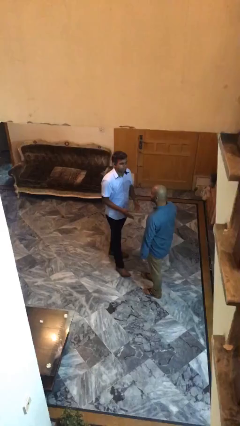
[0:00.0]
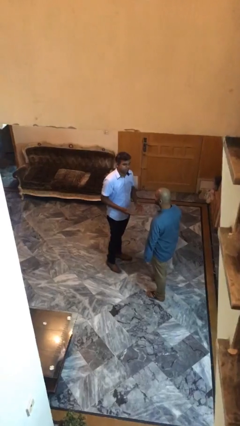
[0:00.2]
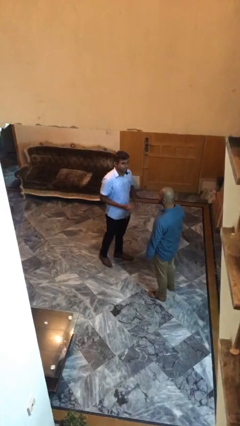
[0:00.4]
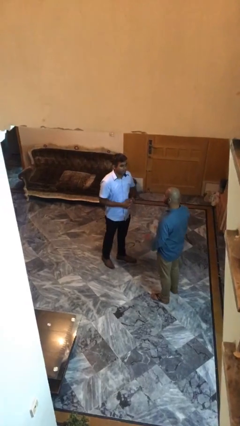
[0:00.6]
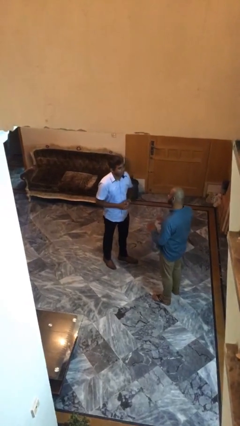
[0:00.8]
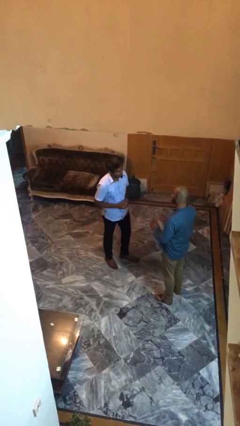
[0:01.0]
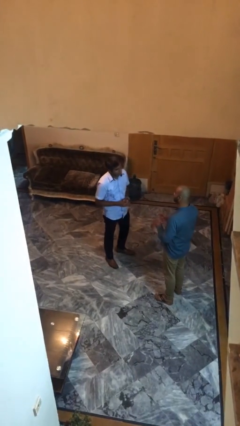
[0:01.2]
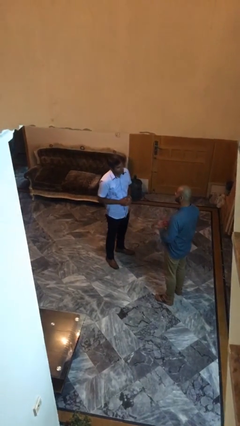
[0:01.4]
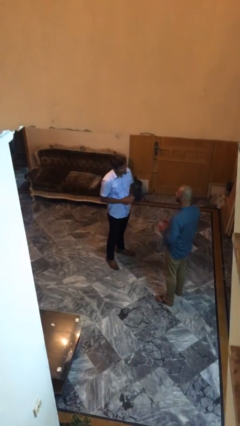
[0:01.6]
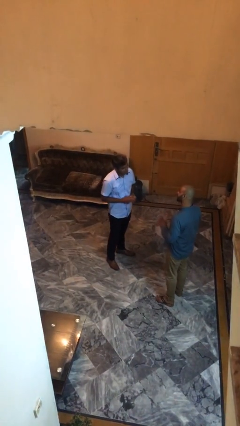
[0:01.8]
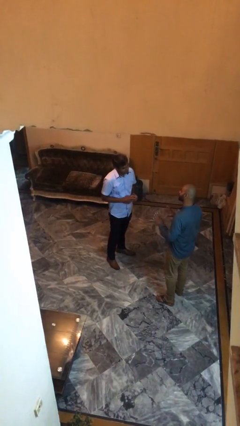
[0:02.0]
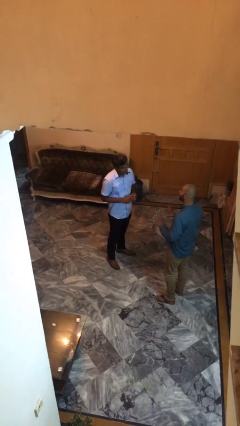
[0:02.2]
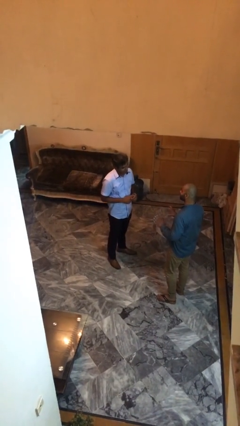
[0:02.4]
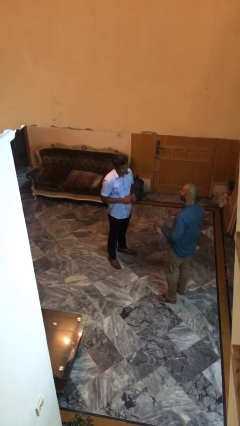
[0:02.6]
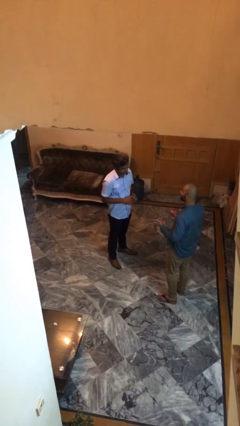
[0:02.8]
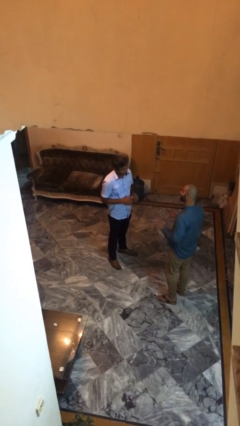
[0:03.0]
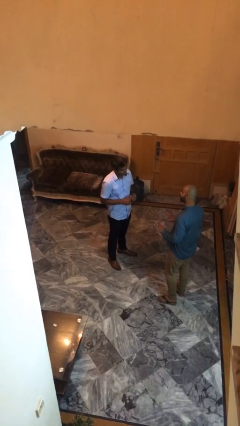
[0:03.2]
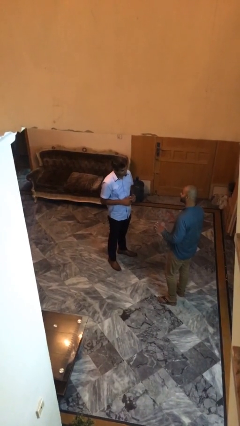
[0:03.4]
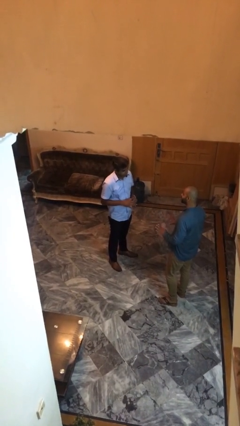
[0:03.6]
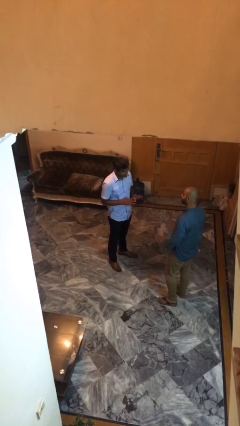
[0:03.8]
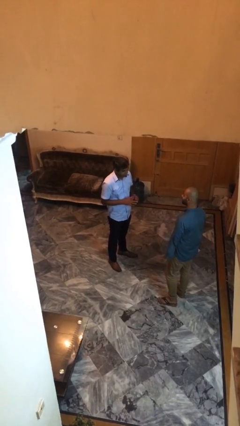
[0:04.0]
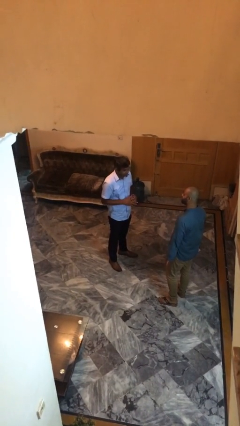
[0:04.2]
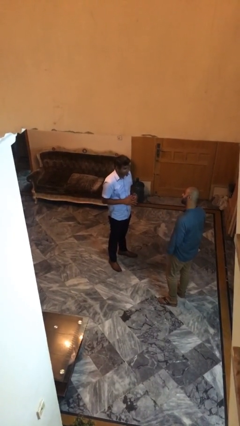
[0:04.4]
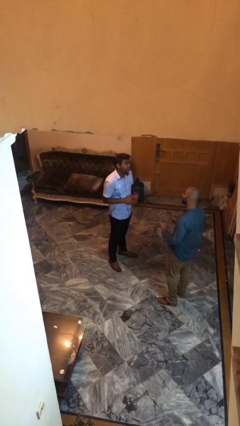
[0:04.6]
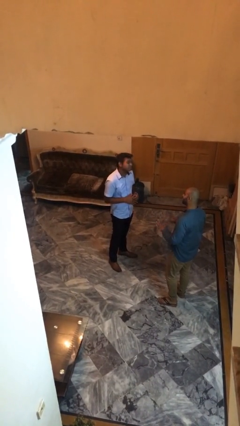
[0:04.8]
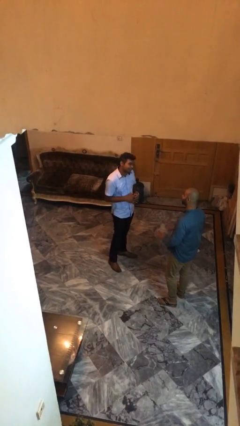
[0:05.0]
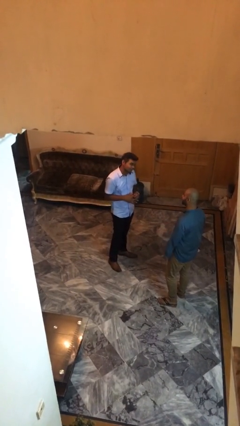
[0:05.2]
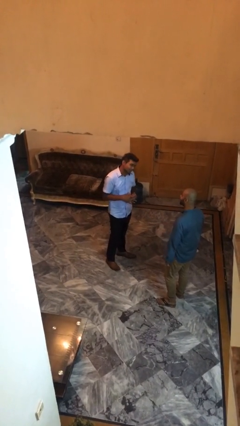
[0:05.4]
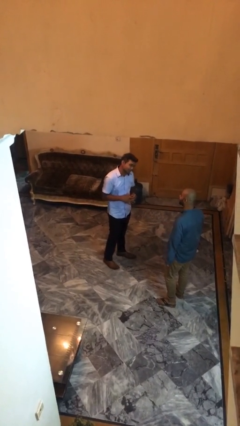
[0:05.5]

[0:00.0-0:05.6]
person talks to person

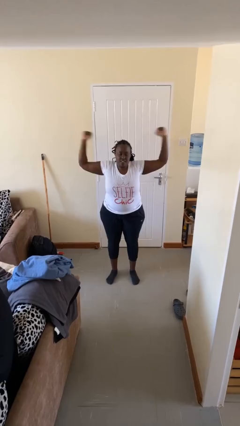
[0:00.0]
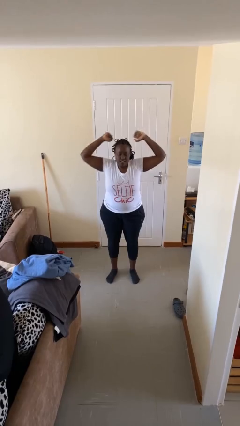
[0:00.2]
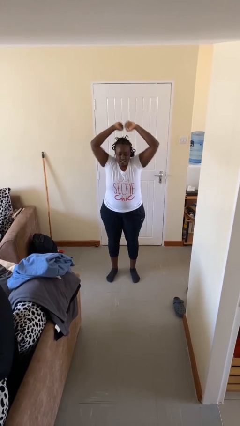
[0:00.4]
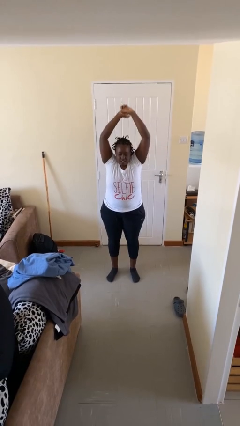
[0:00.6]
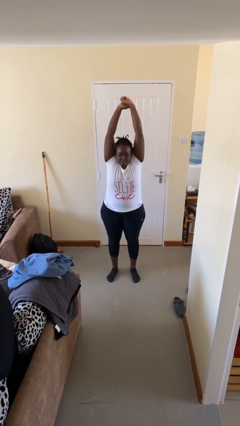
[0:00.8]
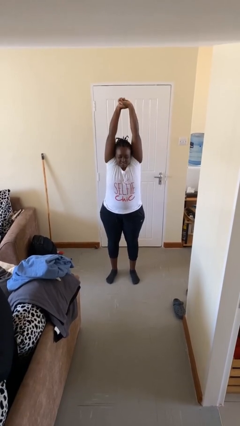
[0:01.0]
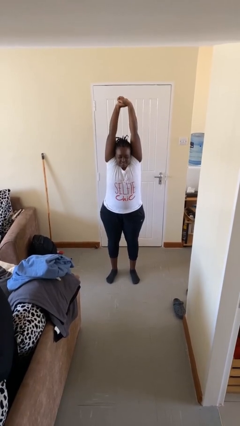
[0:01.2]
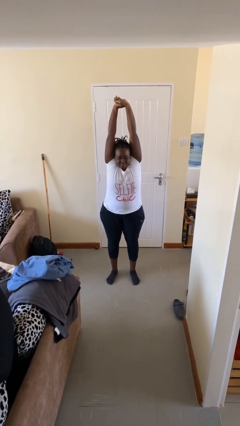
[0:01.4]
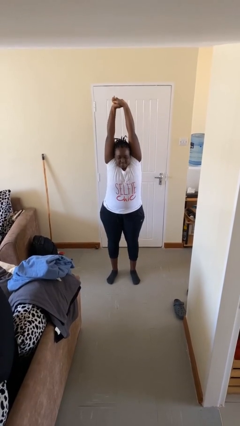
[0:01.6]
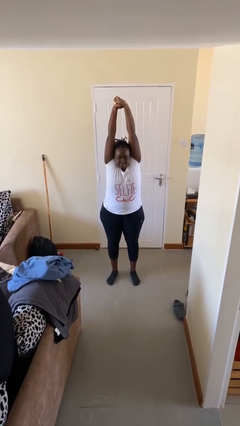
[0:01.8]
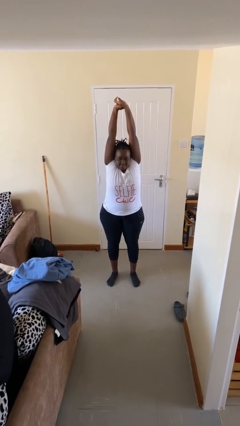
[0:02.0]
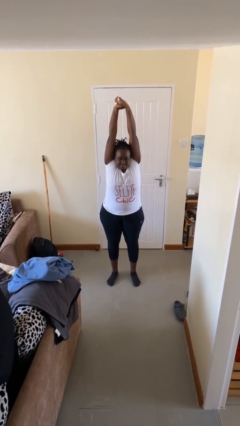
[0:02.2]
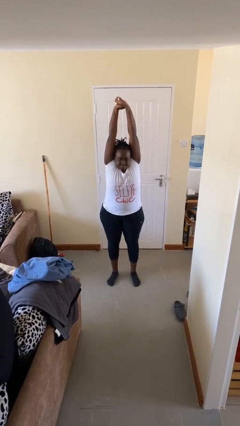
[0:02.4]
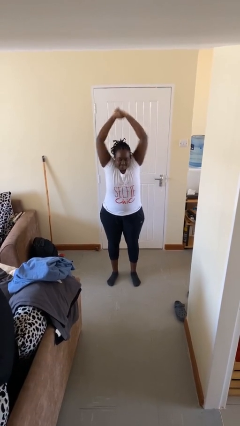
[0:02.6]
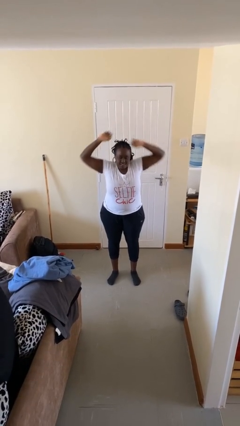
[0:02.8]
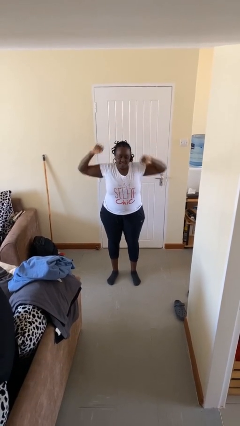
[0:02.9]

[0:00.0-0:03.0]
person stretches arms over head

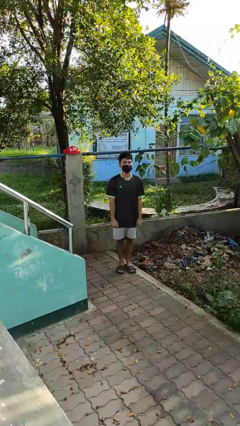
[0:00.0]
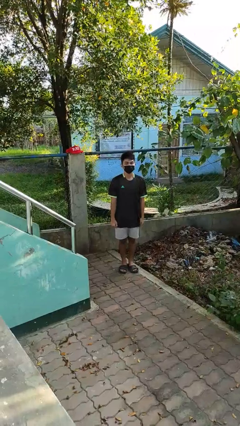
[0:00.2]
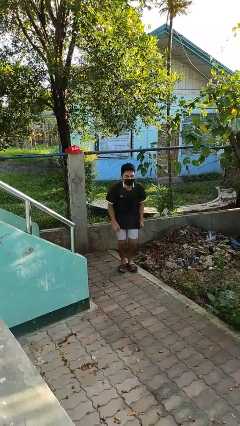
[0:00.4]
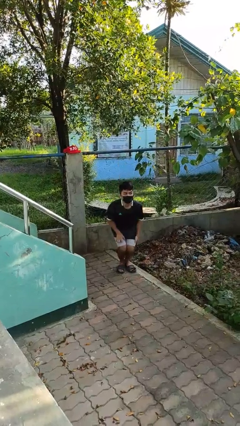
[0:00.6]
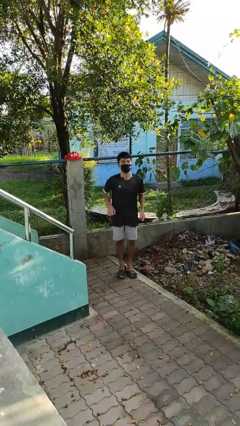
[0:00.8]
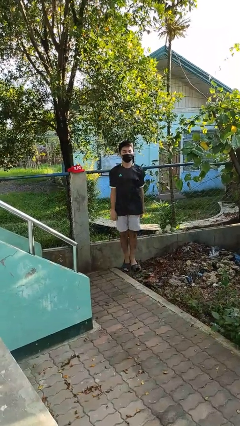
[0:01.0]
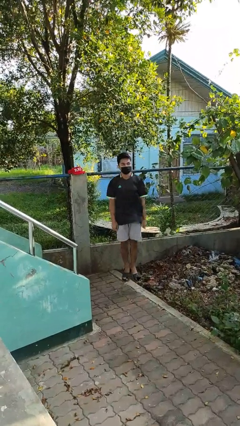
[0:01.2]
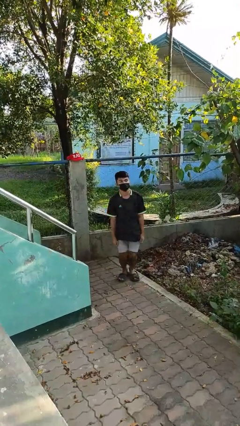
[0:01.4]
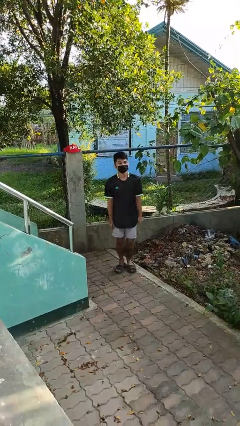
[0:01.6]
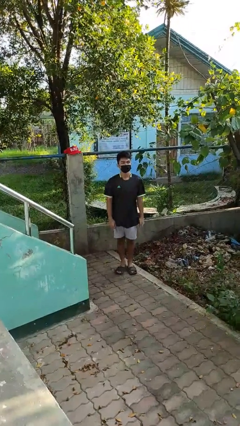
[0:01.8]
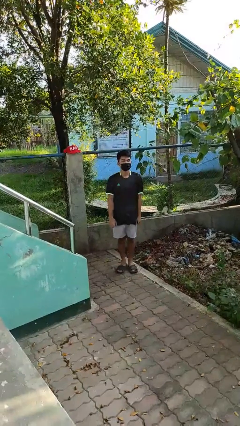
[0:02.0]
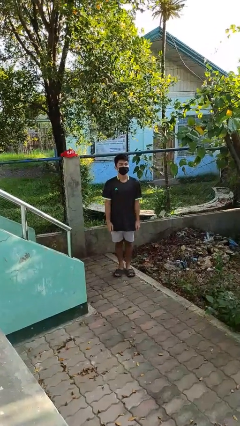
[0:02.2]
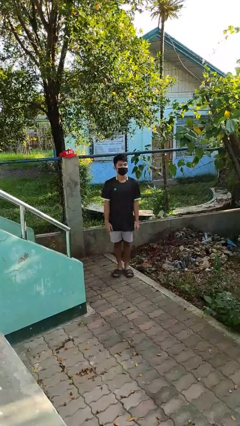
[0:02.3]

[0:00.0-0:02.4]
person jumps

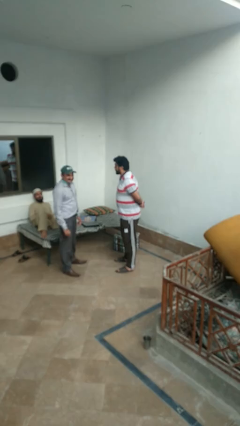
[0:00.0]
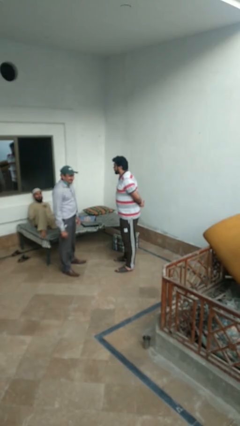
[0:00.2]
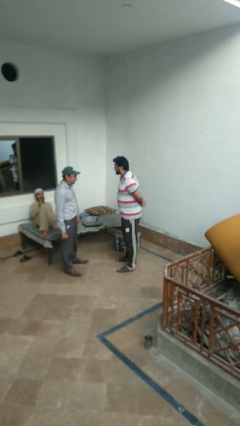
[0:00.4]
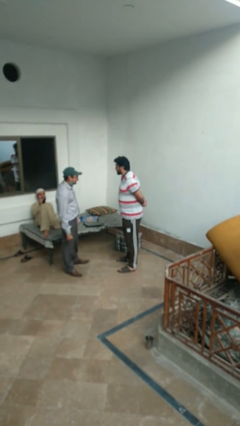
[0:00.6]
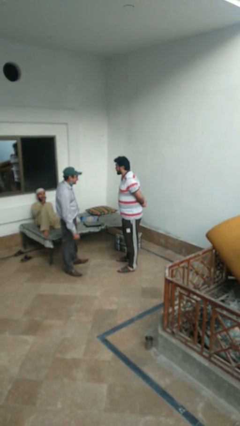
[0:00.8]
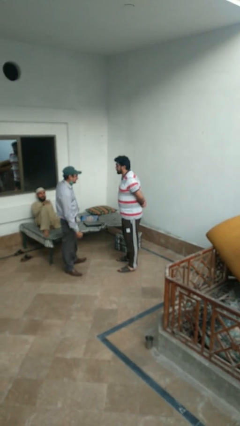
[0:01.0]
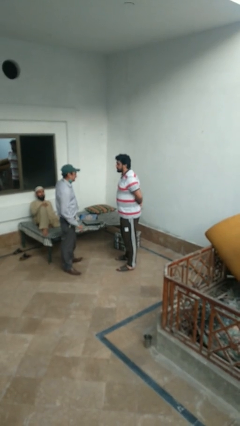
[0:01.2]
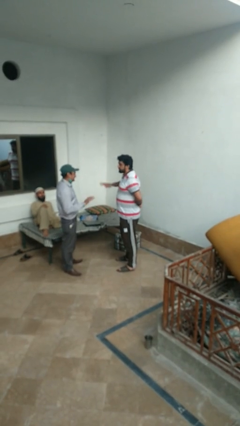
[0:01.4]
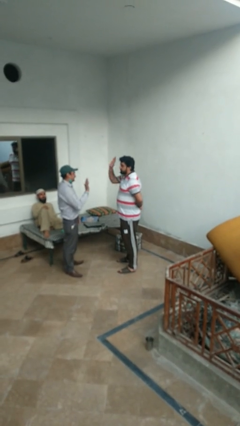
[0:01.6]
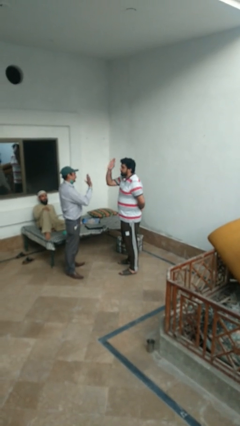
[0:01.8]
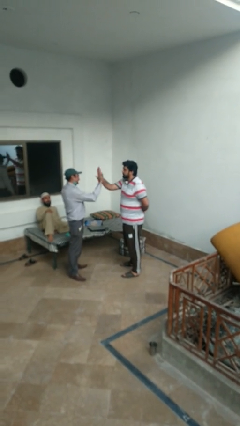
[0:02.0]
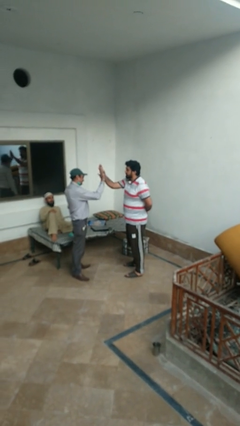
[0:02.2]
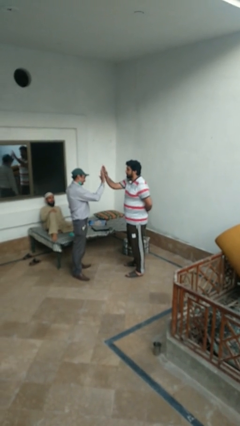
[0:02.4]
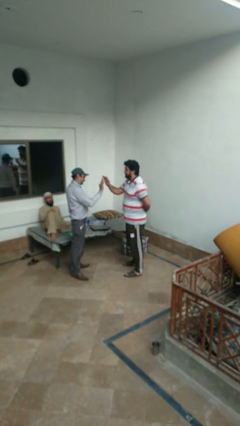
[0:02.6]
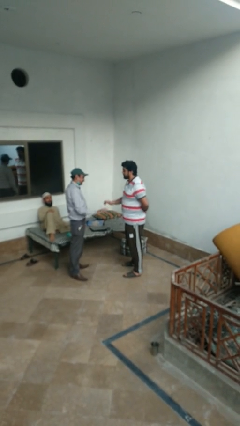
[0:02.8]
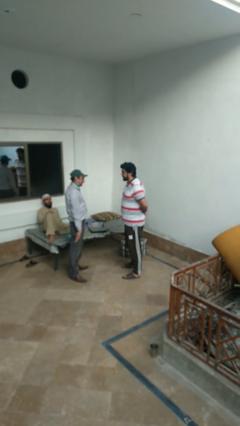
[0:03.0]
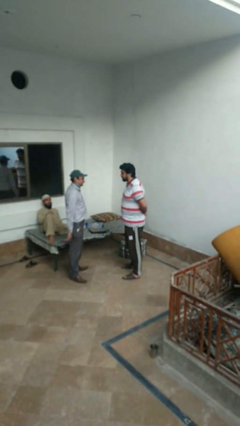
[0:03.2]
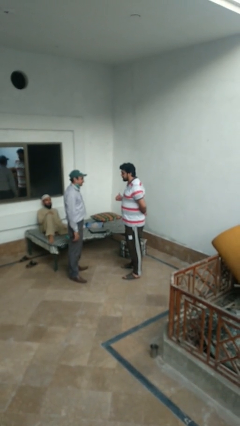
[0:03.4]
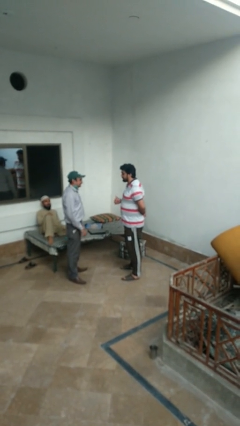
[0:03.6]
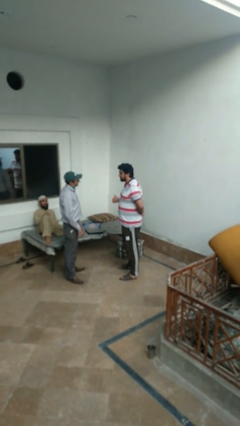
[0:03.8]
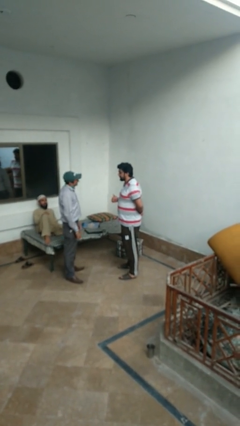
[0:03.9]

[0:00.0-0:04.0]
person highfives hand

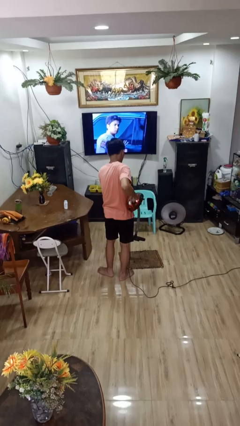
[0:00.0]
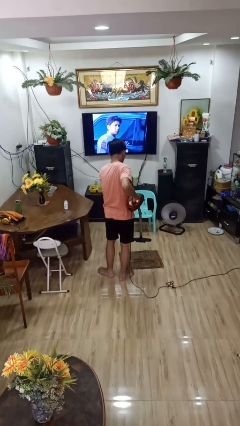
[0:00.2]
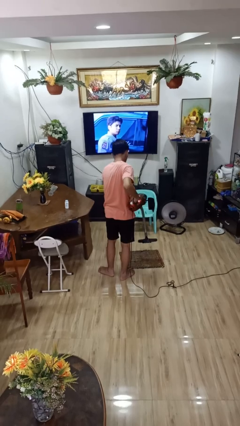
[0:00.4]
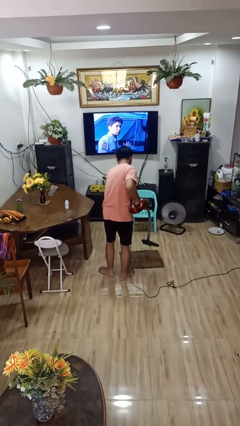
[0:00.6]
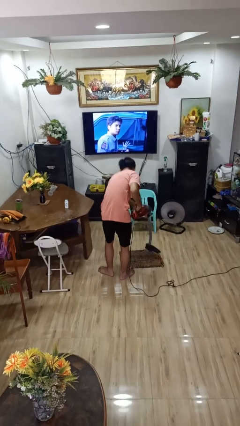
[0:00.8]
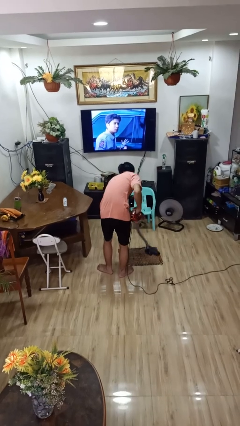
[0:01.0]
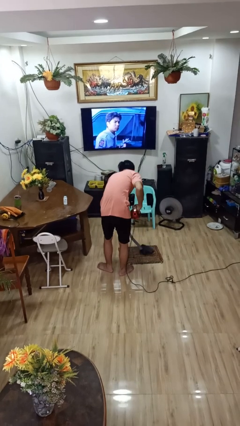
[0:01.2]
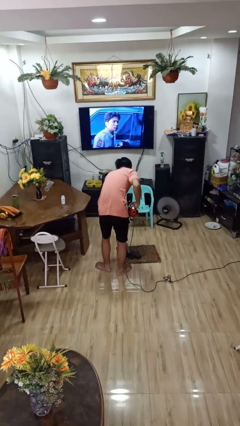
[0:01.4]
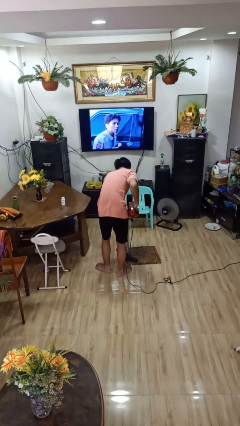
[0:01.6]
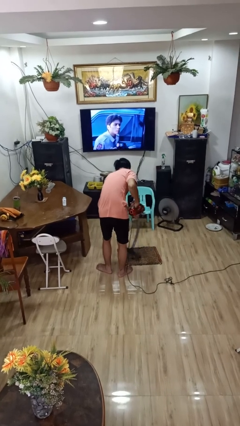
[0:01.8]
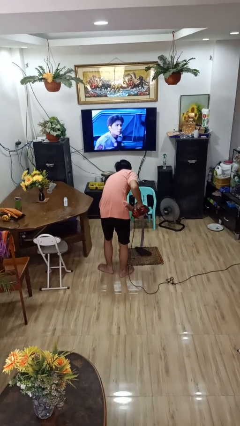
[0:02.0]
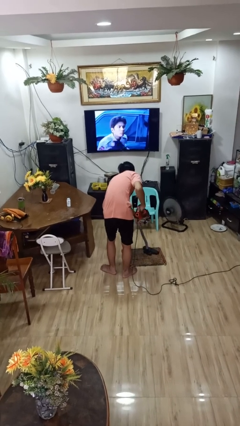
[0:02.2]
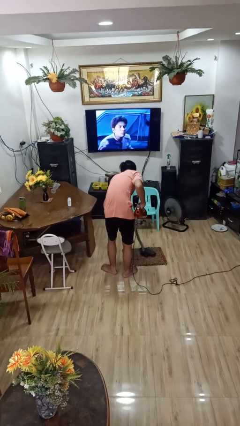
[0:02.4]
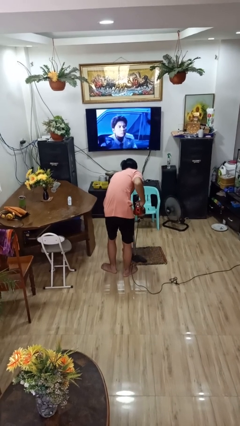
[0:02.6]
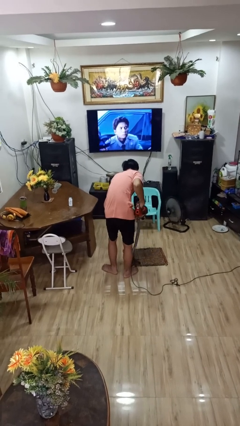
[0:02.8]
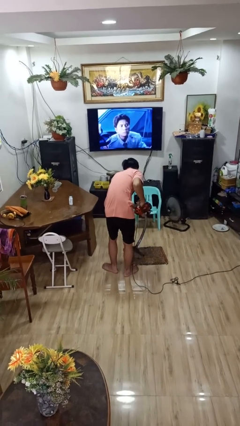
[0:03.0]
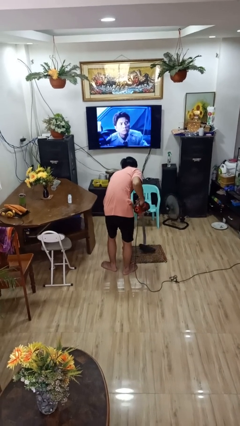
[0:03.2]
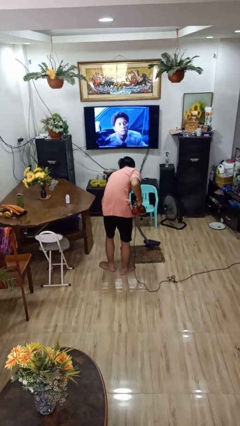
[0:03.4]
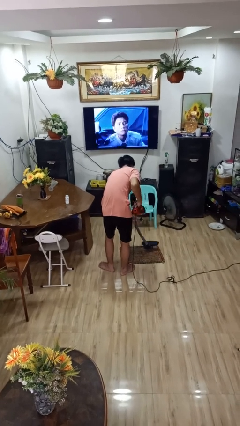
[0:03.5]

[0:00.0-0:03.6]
person vacuums carpet
